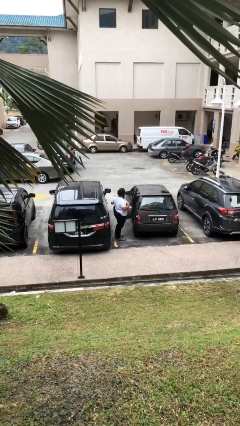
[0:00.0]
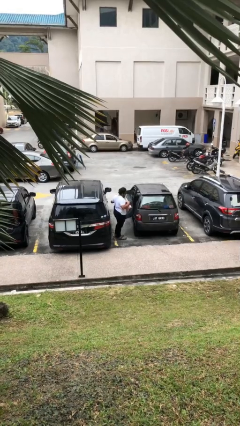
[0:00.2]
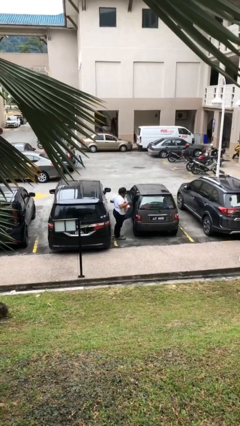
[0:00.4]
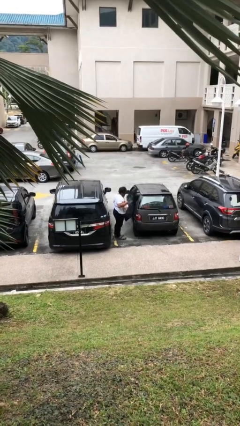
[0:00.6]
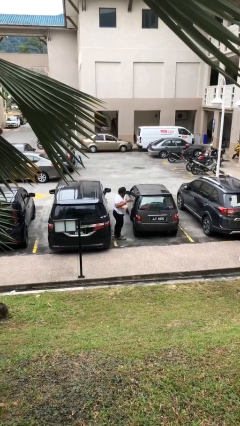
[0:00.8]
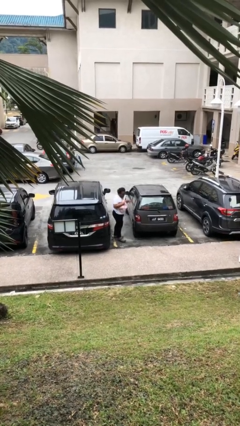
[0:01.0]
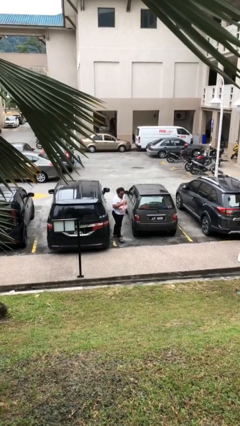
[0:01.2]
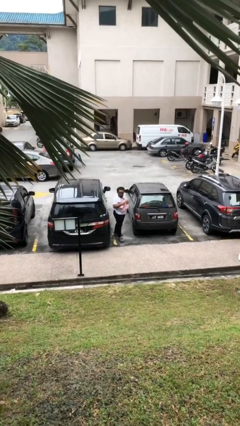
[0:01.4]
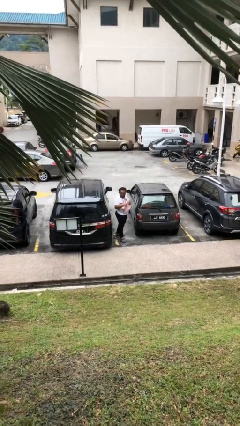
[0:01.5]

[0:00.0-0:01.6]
person closes car door

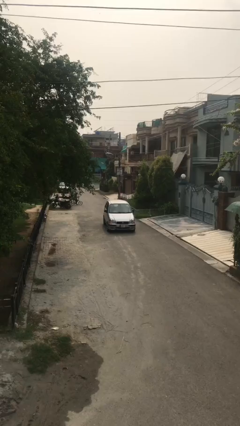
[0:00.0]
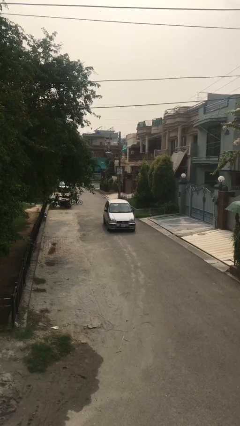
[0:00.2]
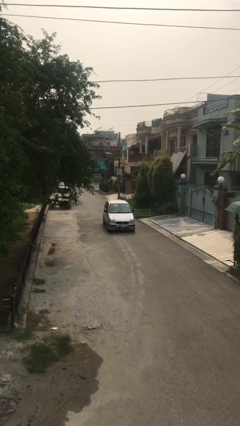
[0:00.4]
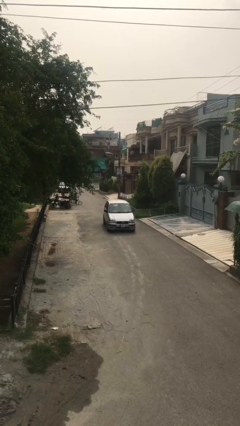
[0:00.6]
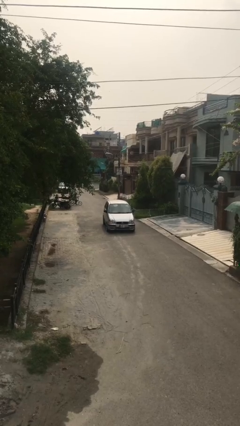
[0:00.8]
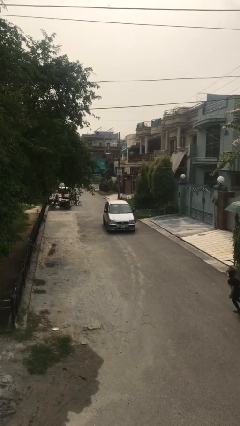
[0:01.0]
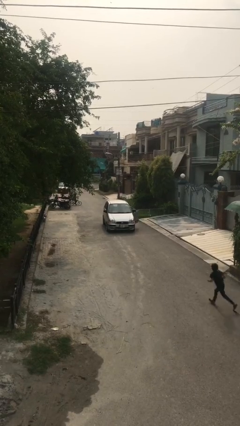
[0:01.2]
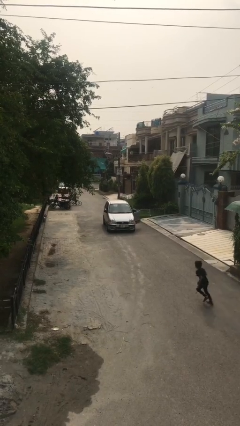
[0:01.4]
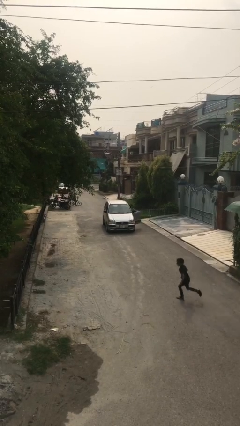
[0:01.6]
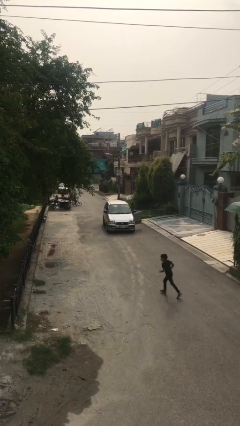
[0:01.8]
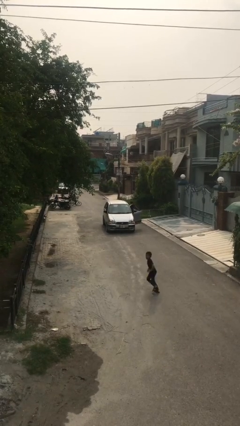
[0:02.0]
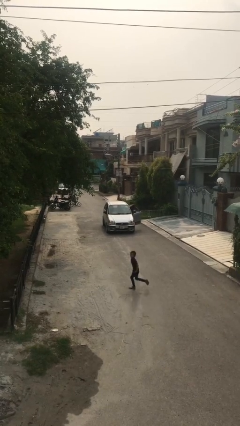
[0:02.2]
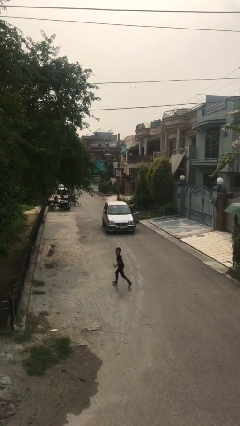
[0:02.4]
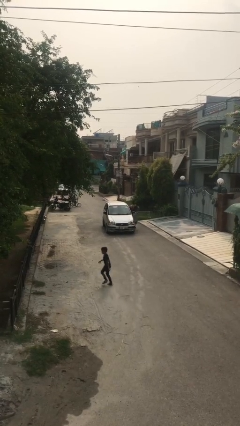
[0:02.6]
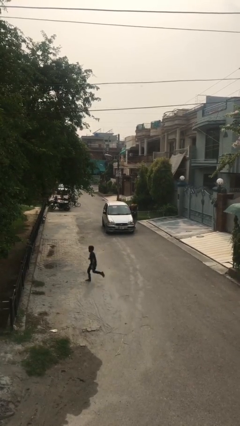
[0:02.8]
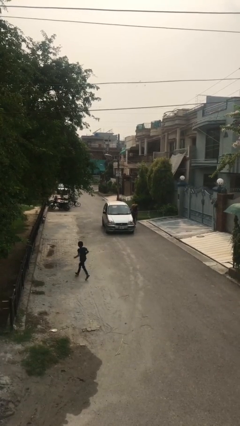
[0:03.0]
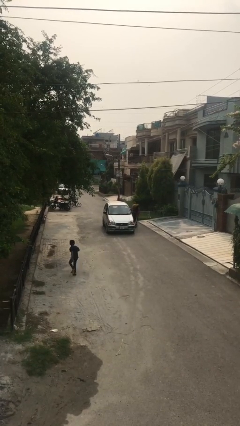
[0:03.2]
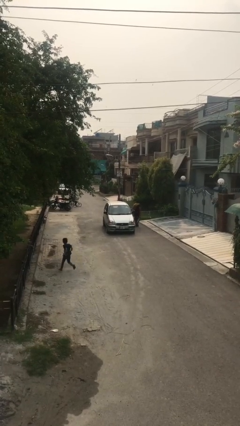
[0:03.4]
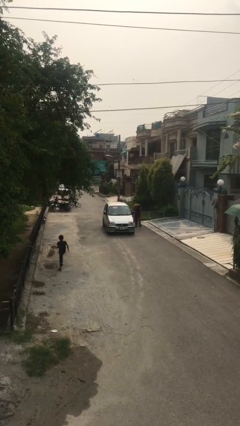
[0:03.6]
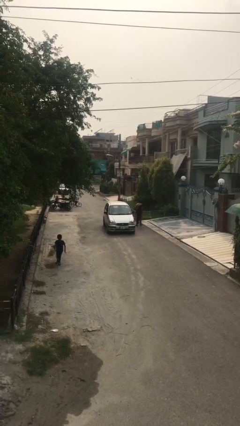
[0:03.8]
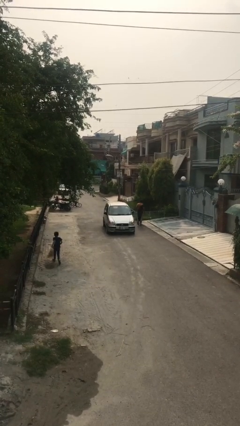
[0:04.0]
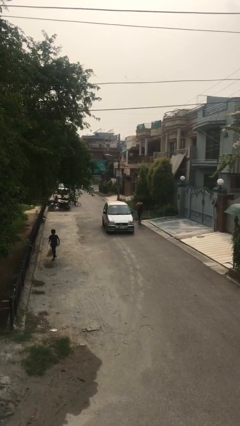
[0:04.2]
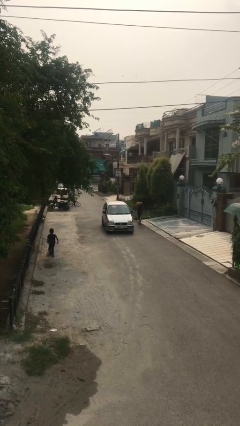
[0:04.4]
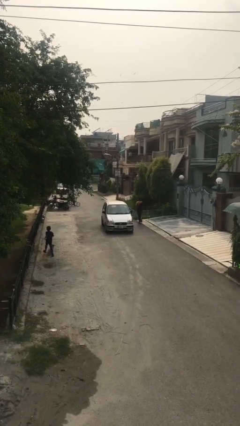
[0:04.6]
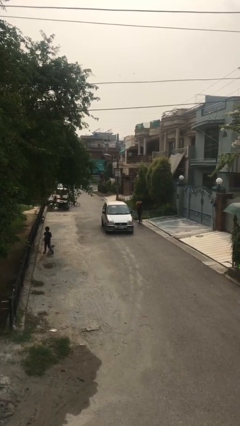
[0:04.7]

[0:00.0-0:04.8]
car drops off person

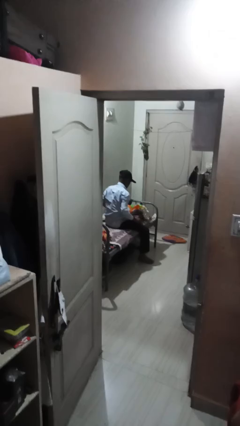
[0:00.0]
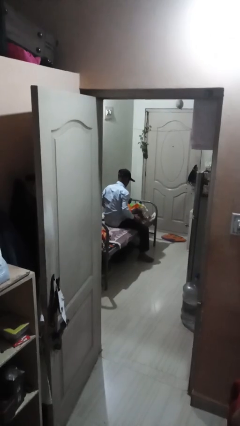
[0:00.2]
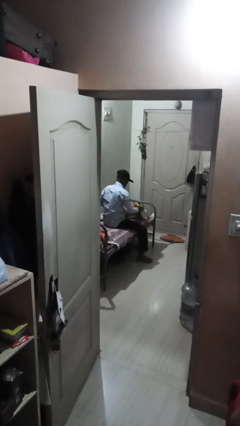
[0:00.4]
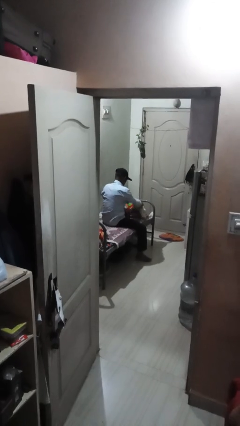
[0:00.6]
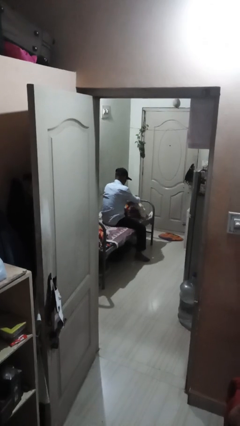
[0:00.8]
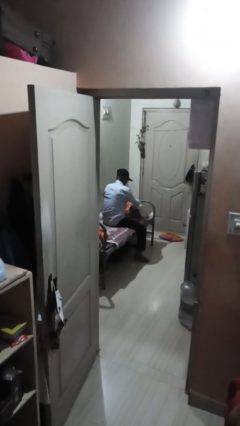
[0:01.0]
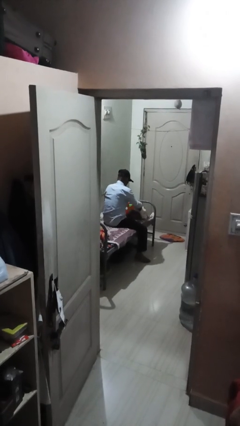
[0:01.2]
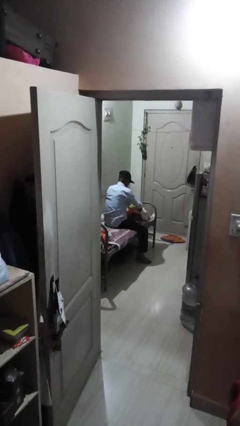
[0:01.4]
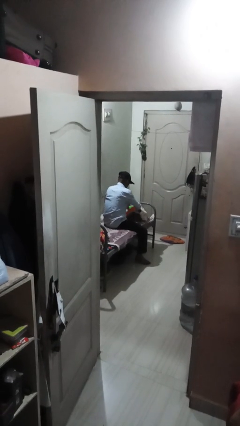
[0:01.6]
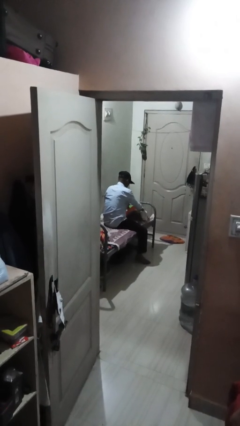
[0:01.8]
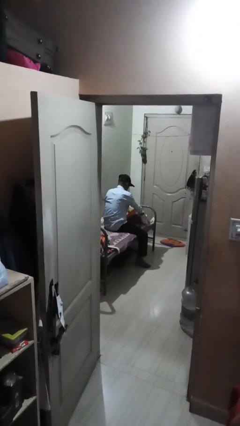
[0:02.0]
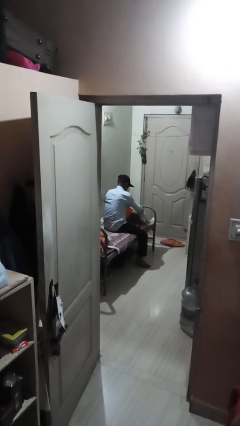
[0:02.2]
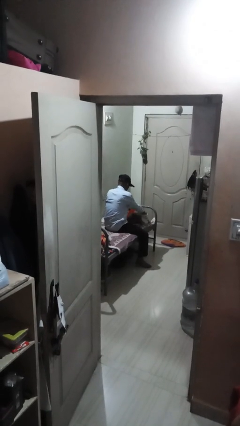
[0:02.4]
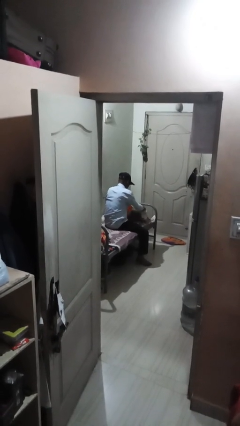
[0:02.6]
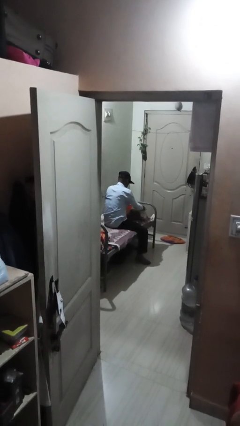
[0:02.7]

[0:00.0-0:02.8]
person searches in bag

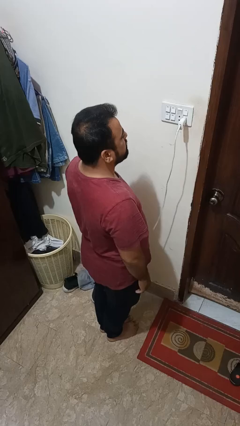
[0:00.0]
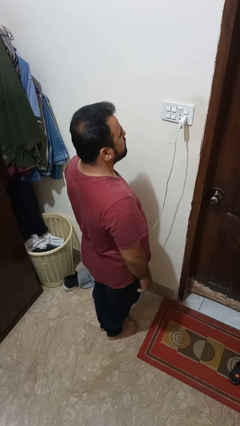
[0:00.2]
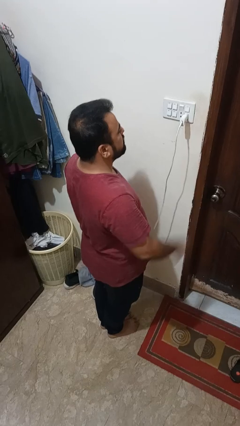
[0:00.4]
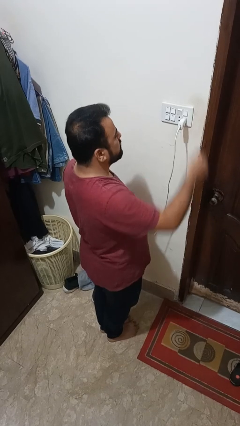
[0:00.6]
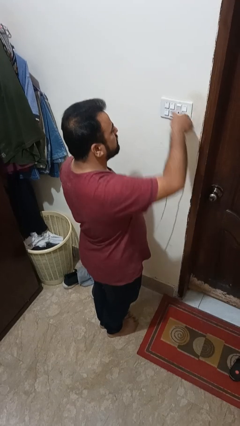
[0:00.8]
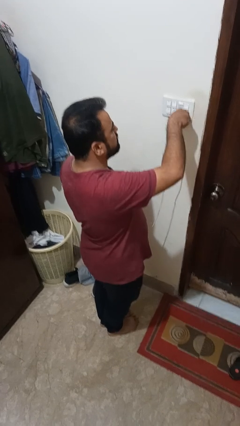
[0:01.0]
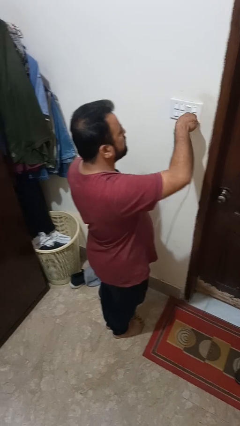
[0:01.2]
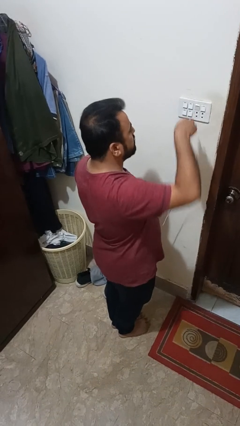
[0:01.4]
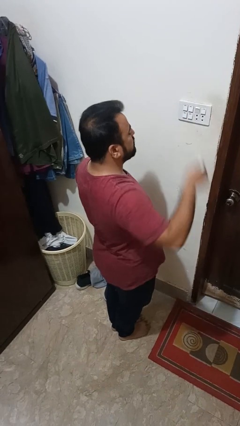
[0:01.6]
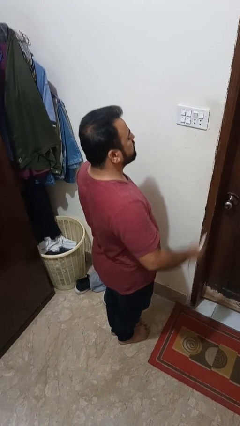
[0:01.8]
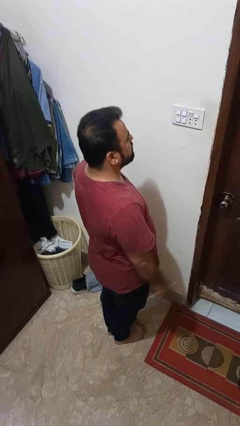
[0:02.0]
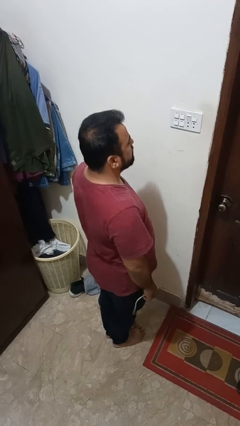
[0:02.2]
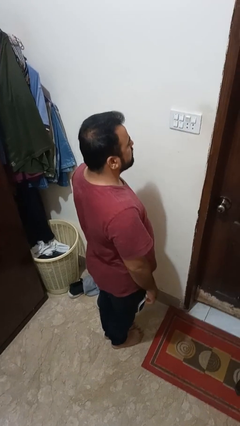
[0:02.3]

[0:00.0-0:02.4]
person unplugs from electrical socket

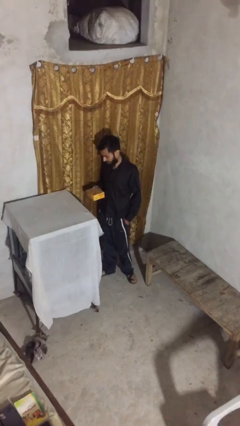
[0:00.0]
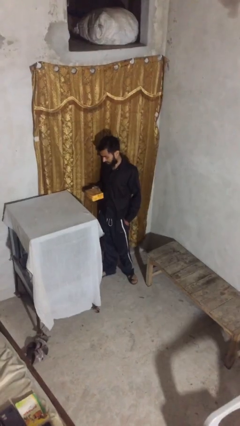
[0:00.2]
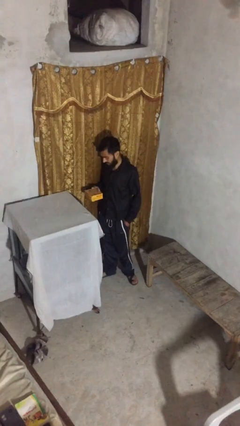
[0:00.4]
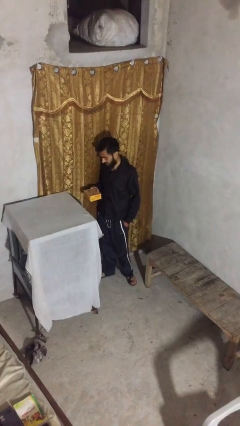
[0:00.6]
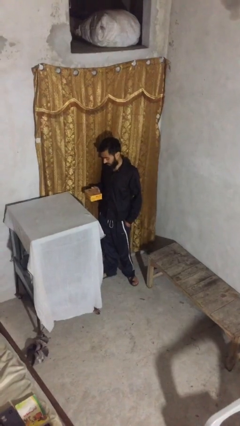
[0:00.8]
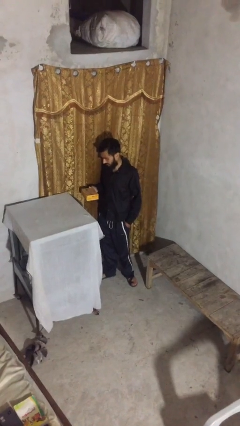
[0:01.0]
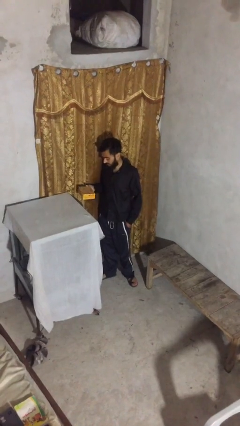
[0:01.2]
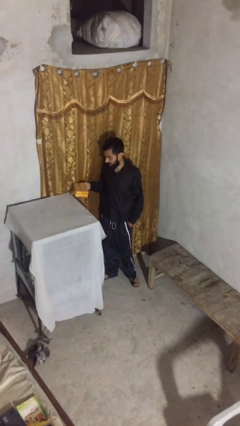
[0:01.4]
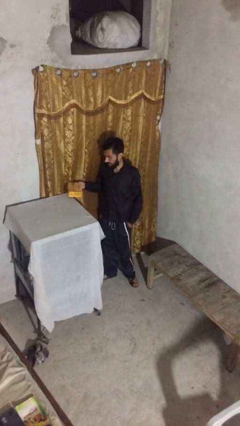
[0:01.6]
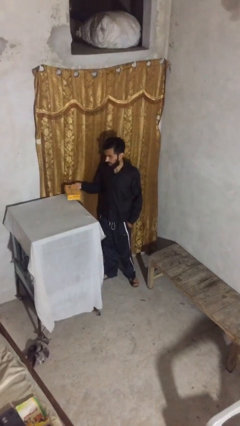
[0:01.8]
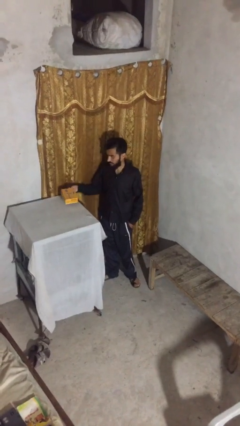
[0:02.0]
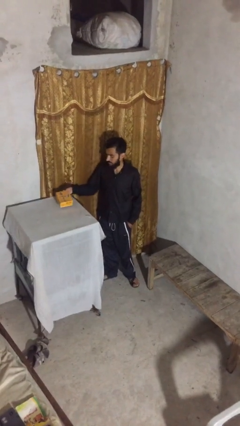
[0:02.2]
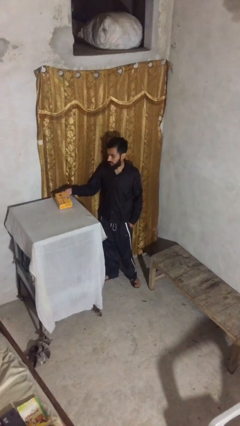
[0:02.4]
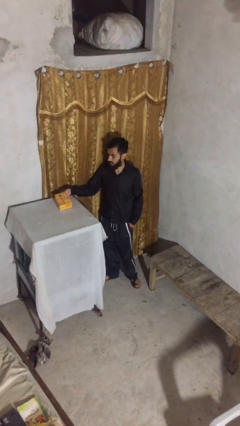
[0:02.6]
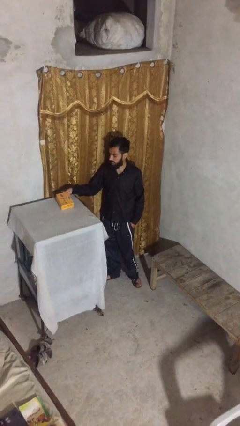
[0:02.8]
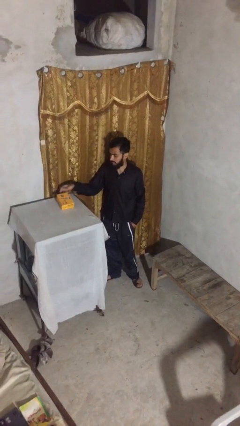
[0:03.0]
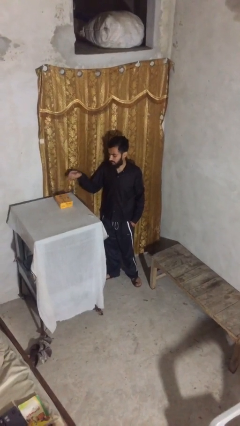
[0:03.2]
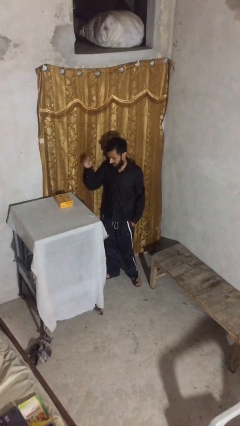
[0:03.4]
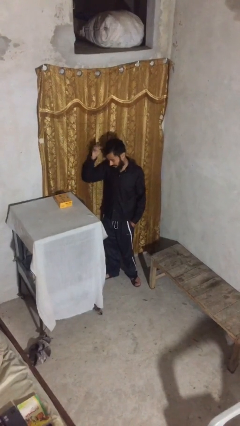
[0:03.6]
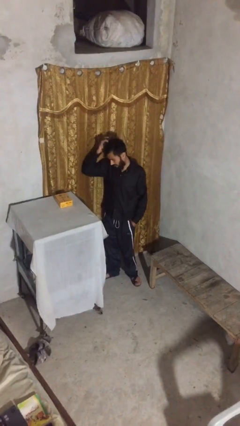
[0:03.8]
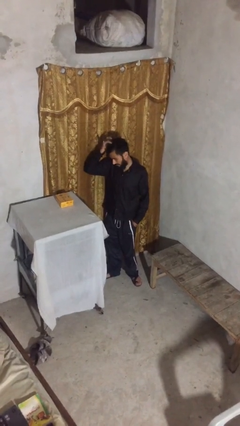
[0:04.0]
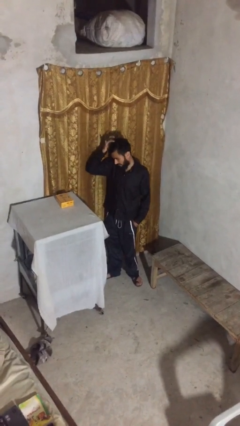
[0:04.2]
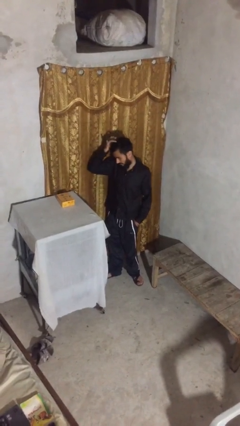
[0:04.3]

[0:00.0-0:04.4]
person puts down object on shelf

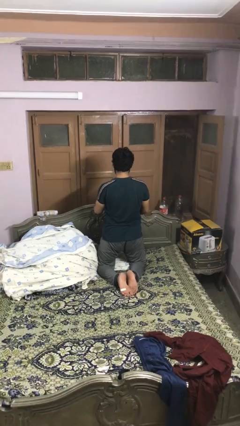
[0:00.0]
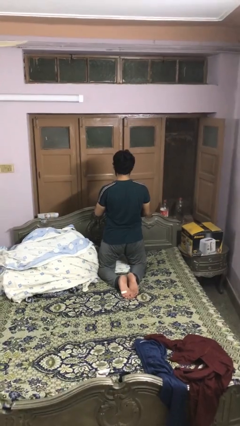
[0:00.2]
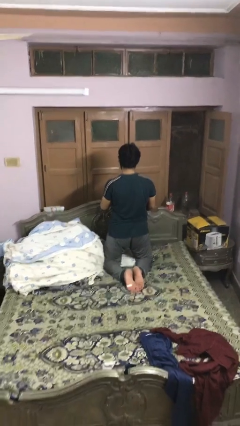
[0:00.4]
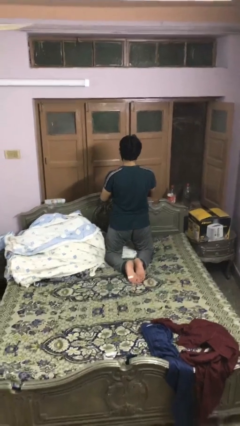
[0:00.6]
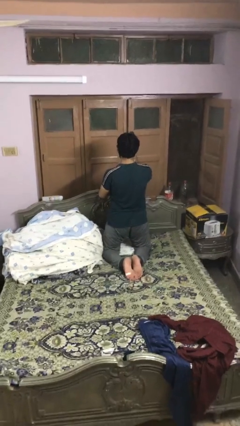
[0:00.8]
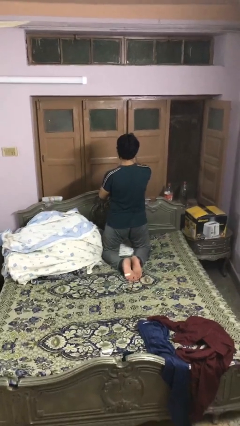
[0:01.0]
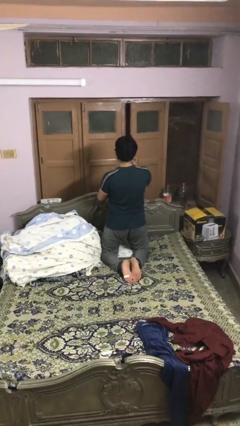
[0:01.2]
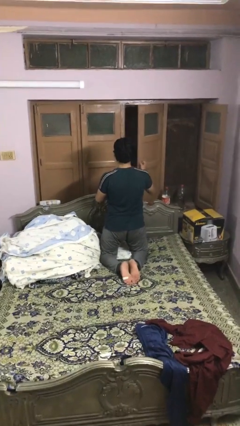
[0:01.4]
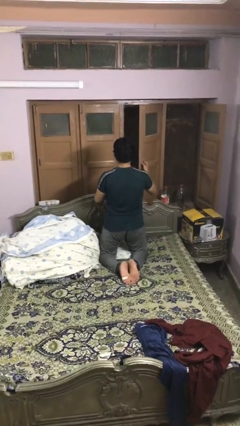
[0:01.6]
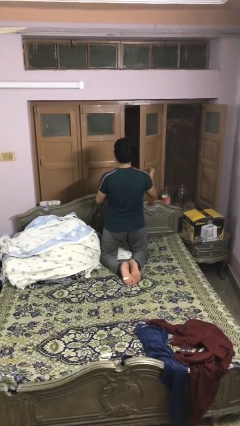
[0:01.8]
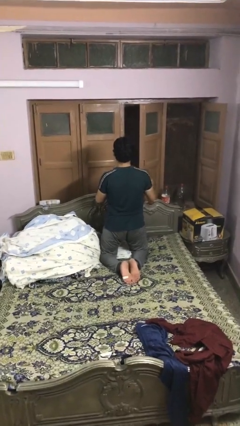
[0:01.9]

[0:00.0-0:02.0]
person opens home window
